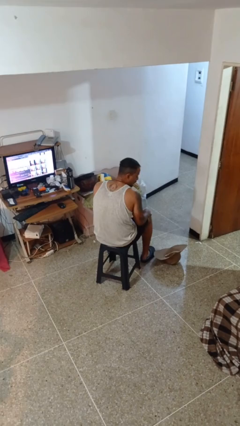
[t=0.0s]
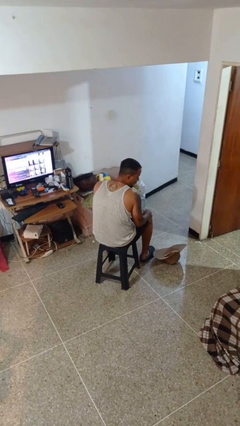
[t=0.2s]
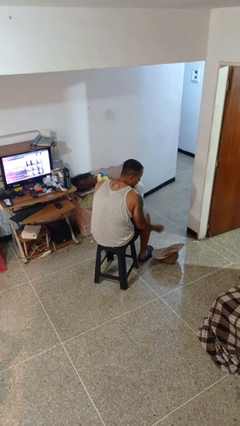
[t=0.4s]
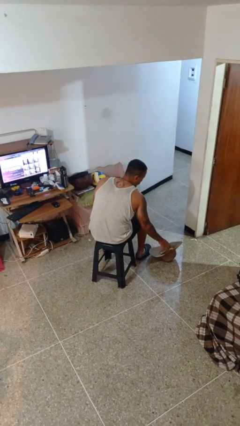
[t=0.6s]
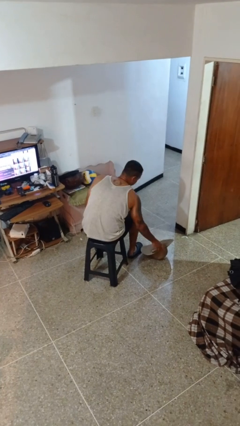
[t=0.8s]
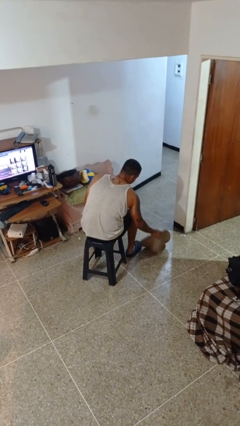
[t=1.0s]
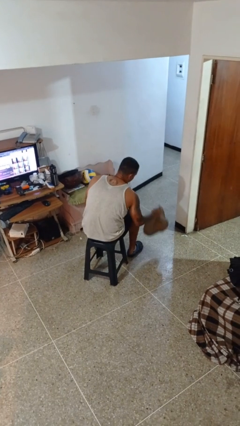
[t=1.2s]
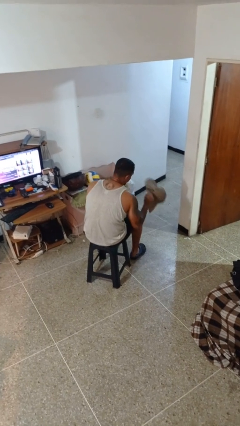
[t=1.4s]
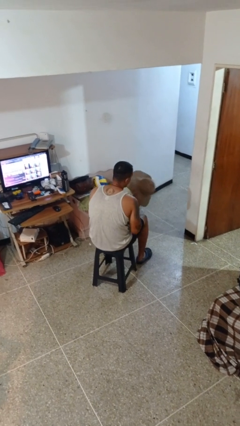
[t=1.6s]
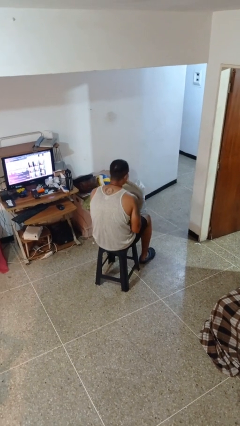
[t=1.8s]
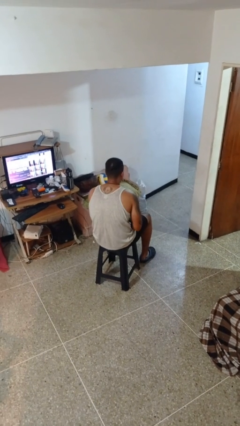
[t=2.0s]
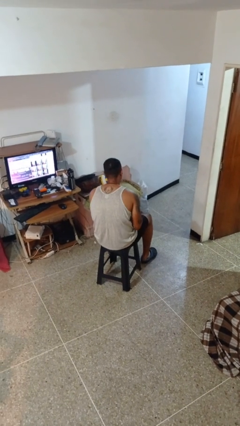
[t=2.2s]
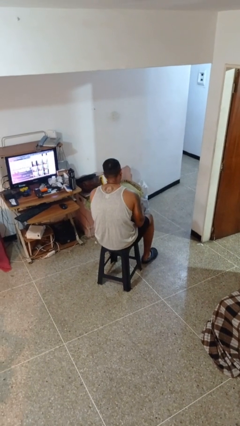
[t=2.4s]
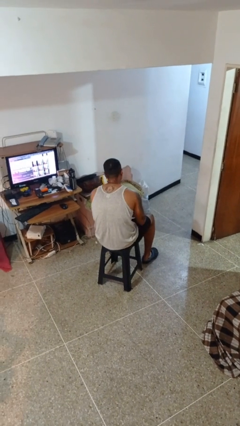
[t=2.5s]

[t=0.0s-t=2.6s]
person picks up object from floor

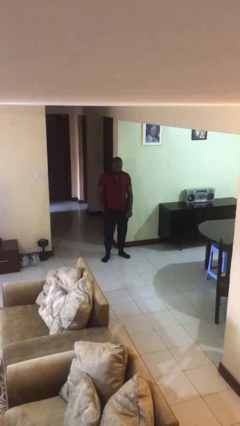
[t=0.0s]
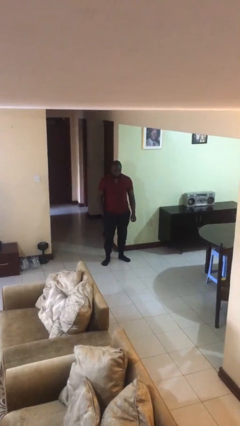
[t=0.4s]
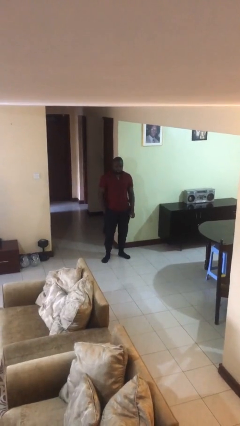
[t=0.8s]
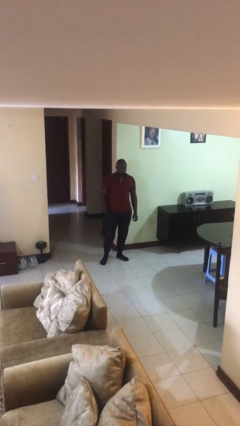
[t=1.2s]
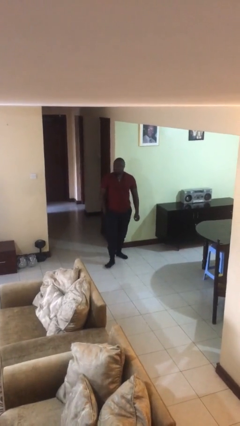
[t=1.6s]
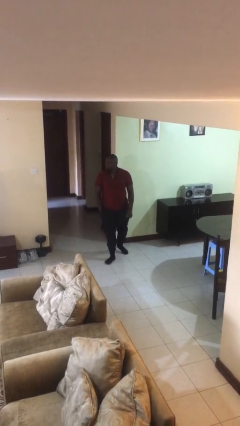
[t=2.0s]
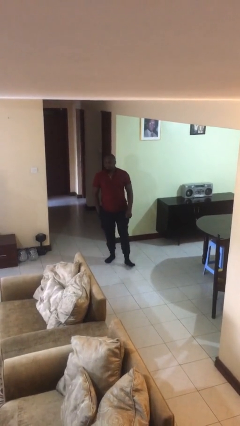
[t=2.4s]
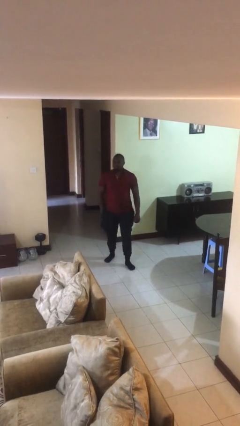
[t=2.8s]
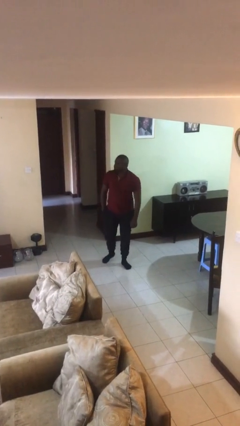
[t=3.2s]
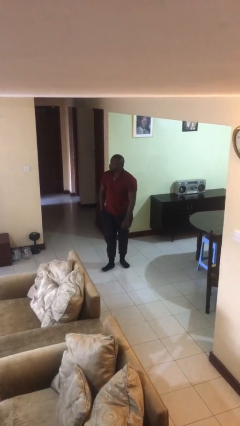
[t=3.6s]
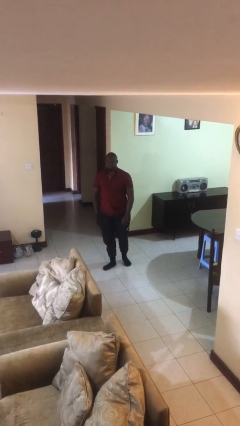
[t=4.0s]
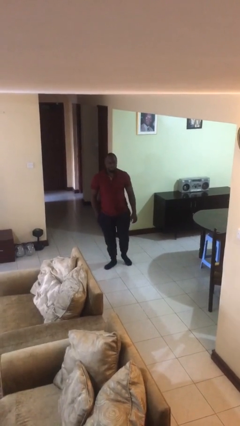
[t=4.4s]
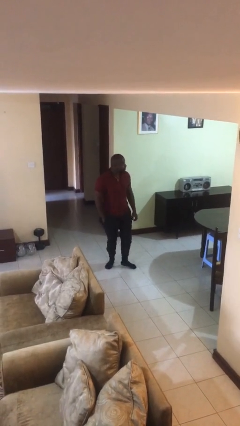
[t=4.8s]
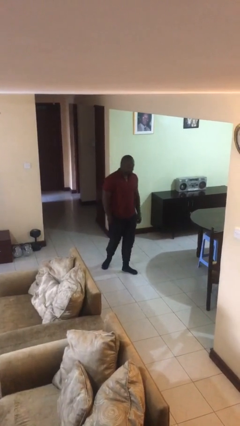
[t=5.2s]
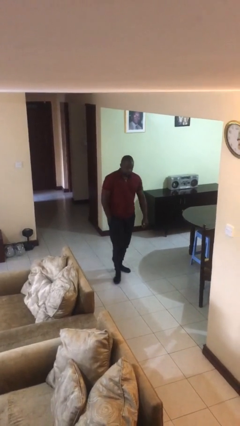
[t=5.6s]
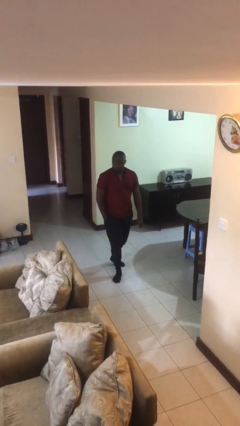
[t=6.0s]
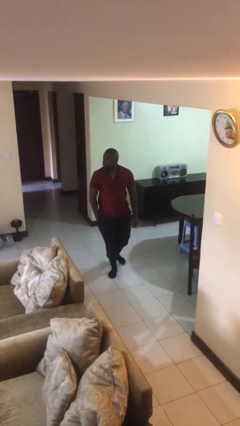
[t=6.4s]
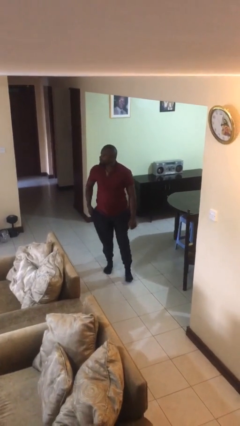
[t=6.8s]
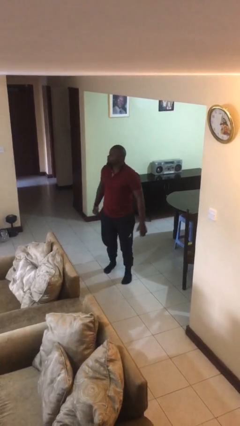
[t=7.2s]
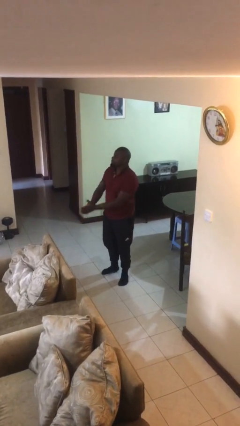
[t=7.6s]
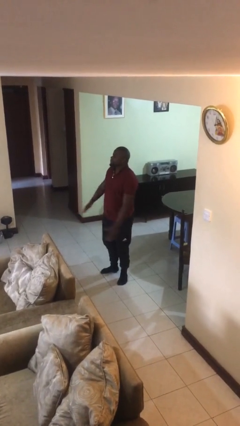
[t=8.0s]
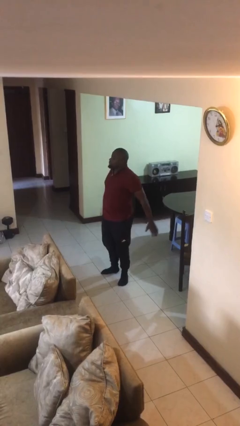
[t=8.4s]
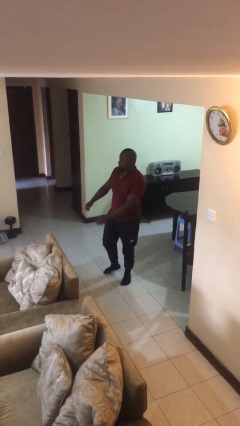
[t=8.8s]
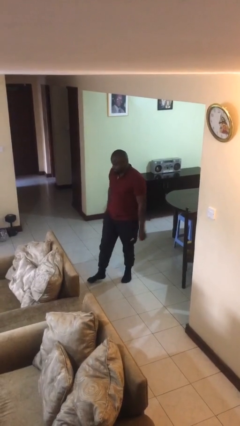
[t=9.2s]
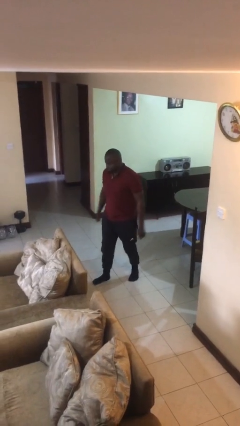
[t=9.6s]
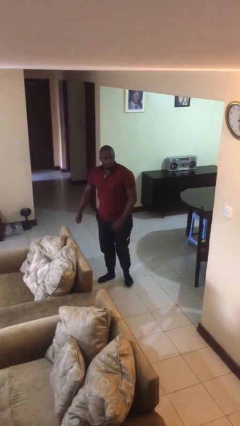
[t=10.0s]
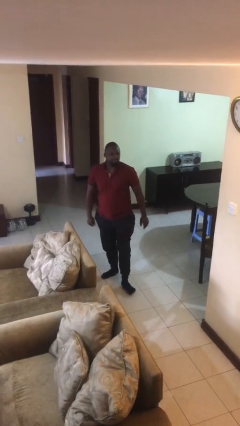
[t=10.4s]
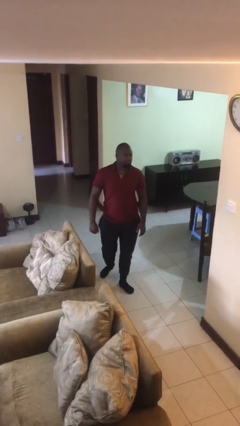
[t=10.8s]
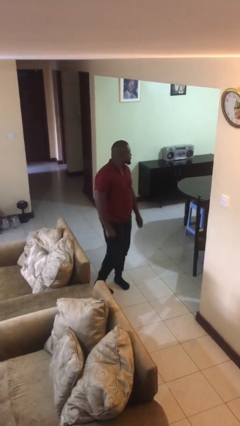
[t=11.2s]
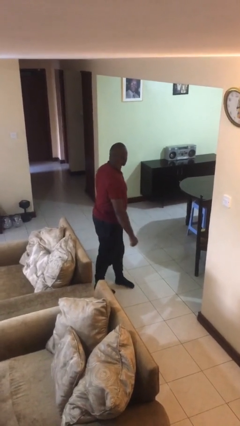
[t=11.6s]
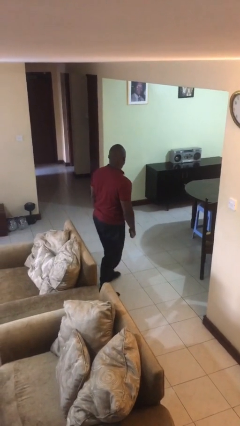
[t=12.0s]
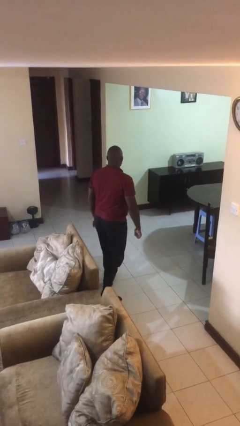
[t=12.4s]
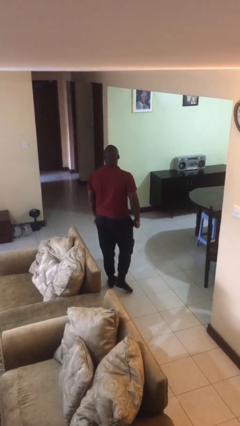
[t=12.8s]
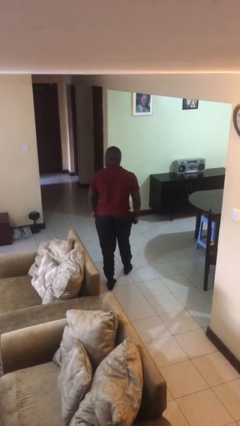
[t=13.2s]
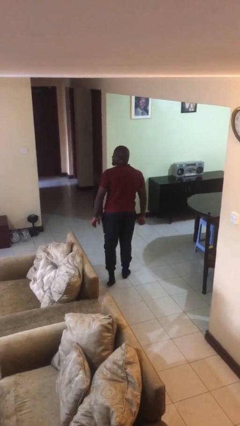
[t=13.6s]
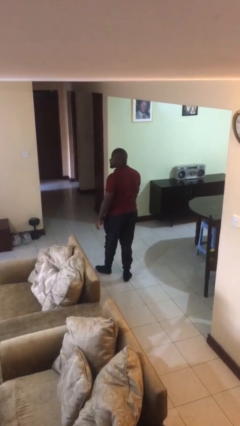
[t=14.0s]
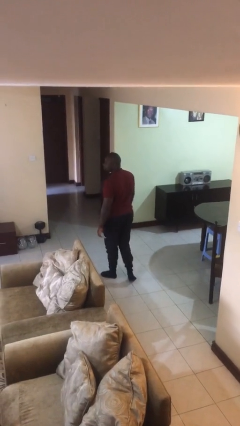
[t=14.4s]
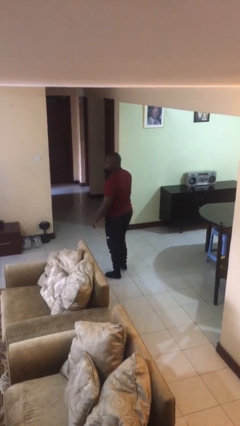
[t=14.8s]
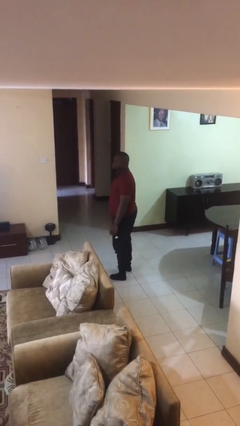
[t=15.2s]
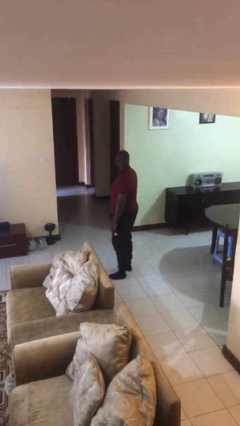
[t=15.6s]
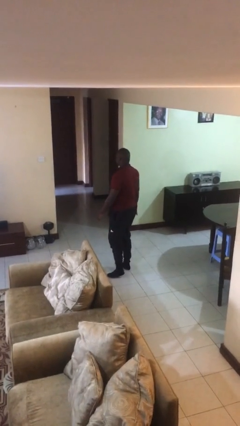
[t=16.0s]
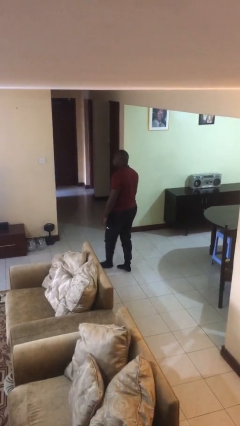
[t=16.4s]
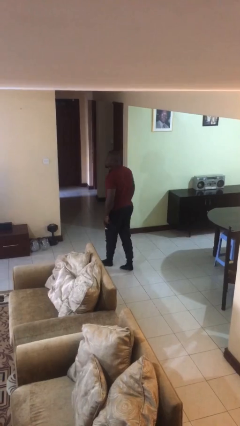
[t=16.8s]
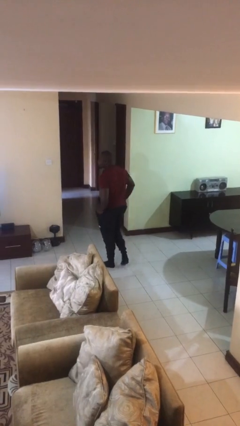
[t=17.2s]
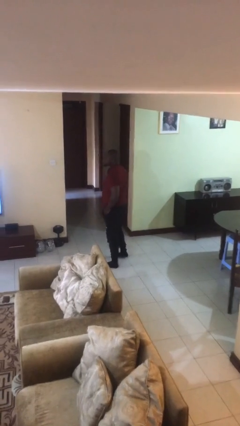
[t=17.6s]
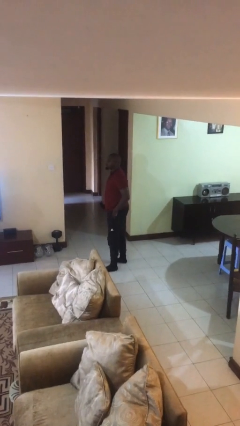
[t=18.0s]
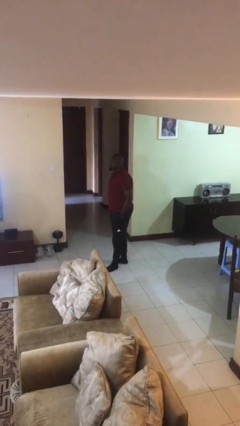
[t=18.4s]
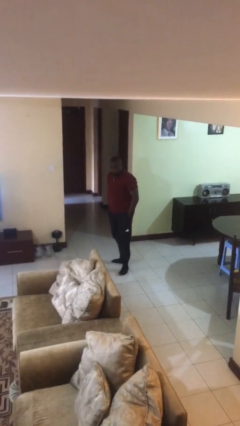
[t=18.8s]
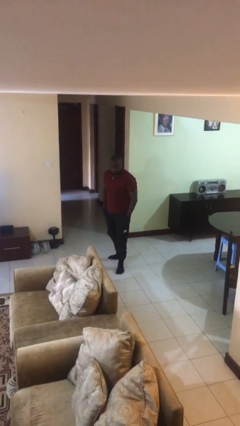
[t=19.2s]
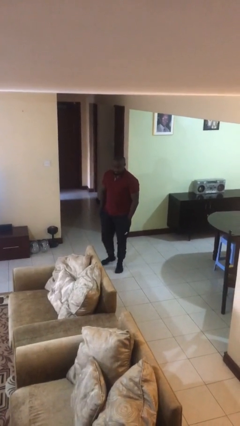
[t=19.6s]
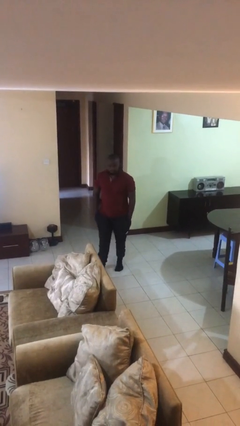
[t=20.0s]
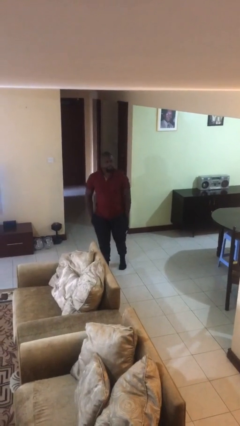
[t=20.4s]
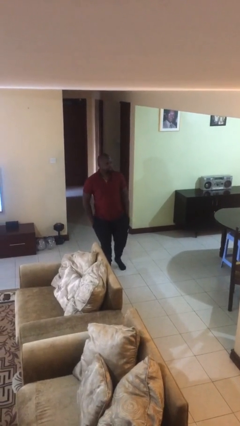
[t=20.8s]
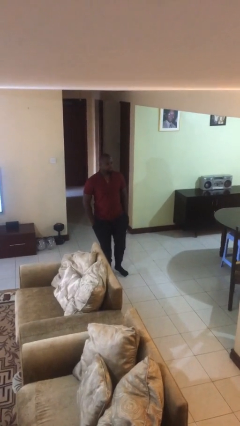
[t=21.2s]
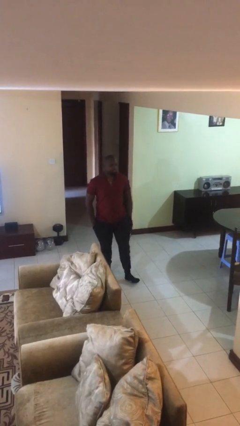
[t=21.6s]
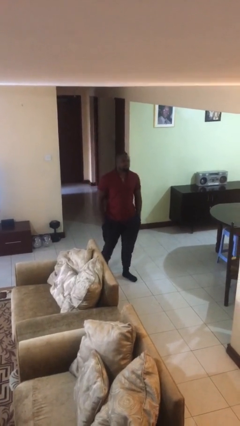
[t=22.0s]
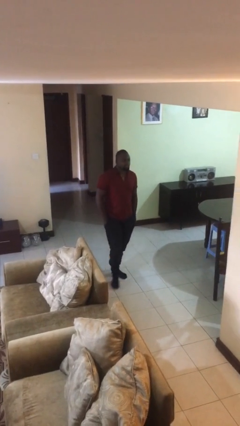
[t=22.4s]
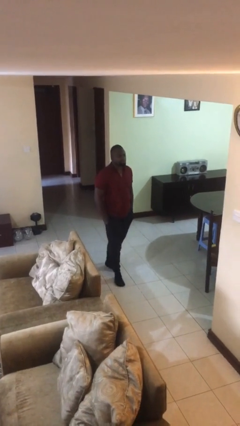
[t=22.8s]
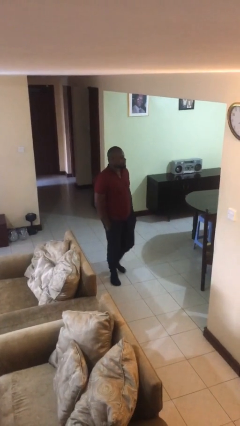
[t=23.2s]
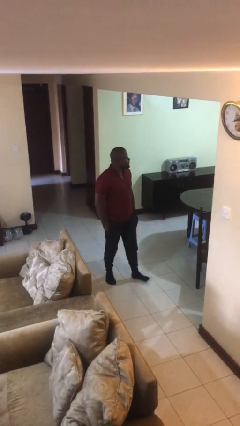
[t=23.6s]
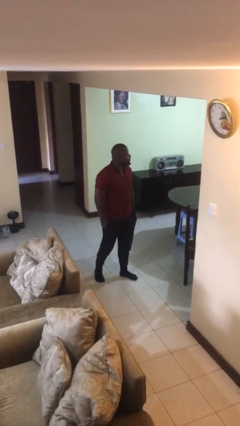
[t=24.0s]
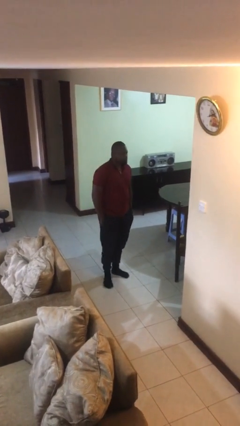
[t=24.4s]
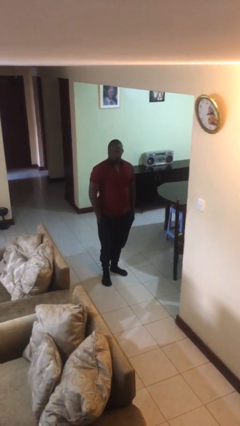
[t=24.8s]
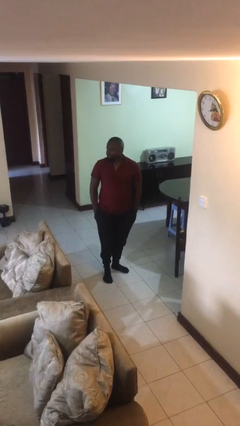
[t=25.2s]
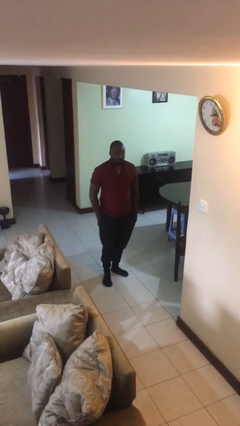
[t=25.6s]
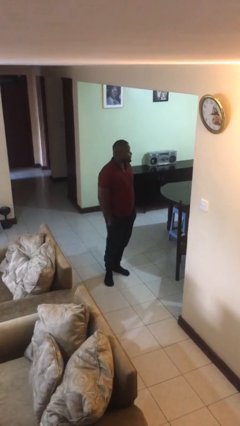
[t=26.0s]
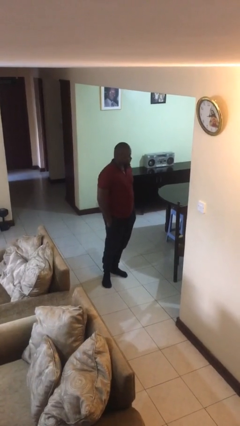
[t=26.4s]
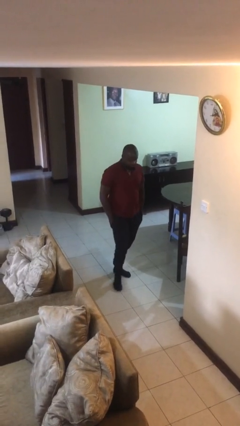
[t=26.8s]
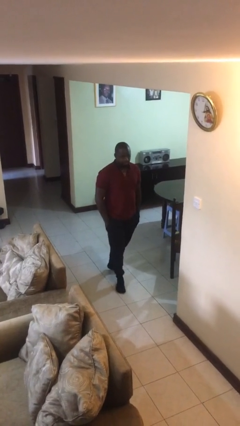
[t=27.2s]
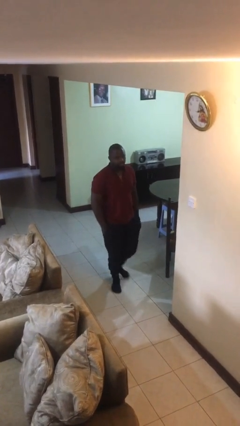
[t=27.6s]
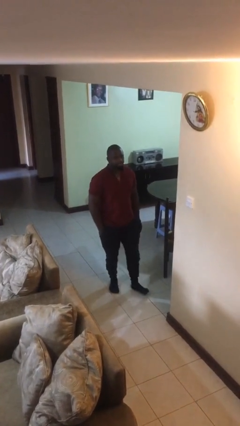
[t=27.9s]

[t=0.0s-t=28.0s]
person walks

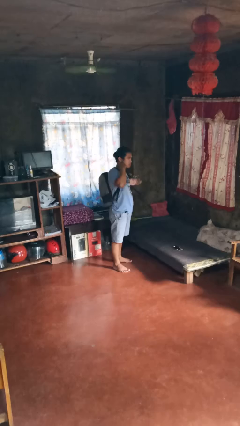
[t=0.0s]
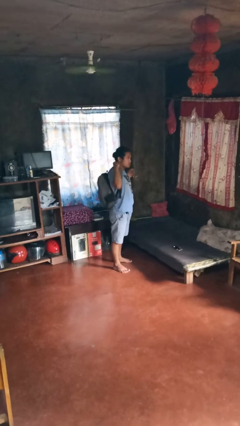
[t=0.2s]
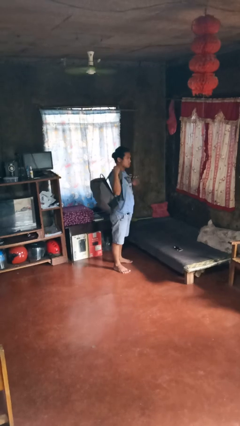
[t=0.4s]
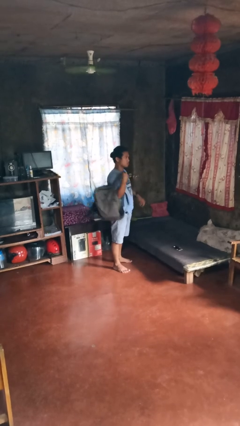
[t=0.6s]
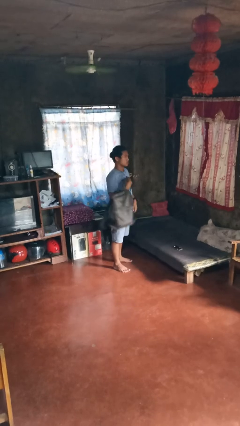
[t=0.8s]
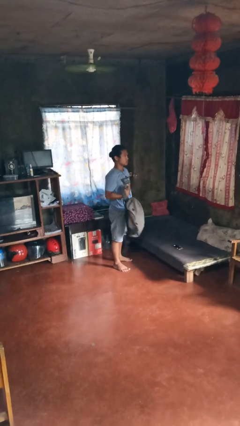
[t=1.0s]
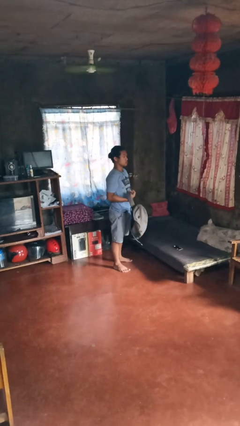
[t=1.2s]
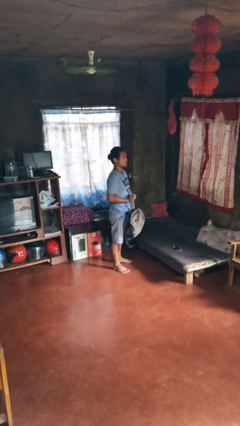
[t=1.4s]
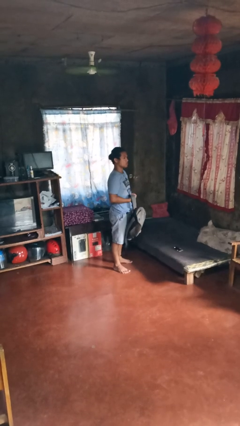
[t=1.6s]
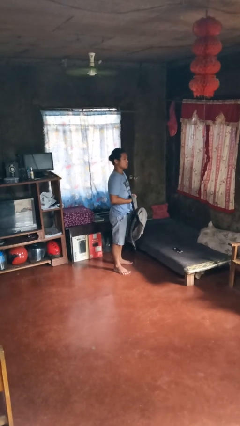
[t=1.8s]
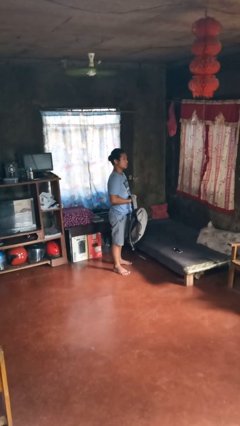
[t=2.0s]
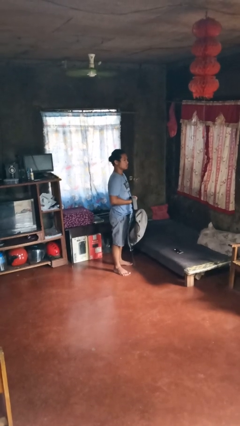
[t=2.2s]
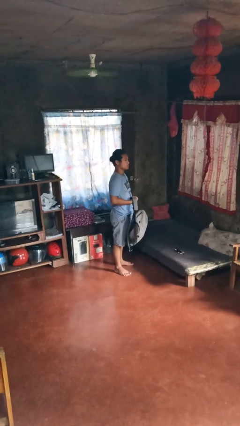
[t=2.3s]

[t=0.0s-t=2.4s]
person takes off backpack
